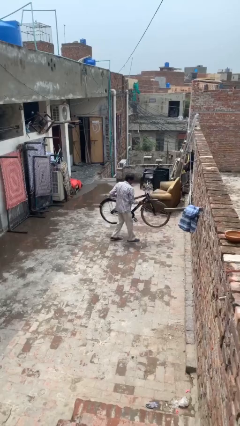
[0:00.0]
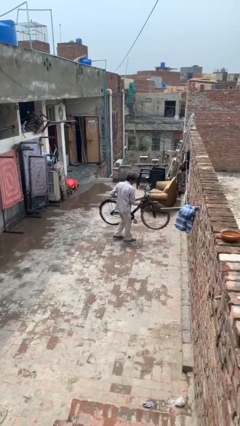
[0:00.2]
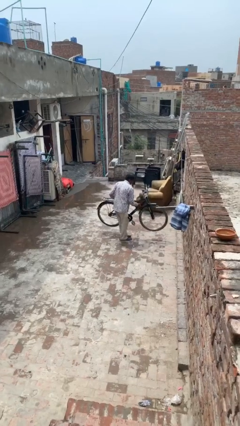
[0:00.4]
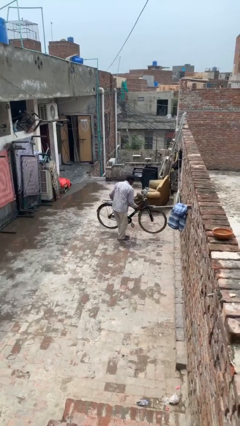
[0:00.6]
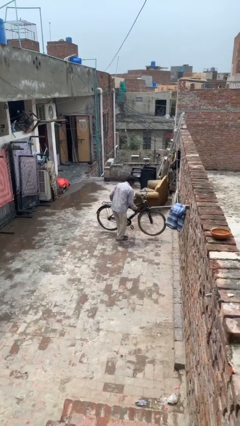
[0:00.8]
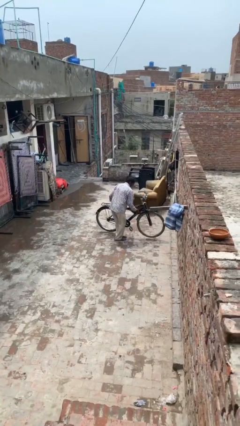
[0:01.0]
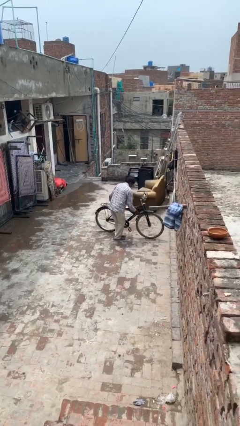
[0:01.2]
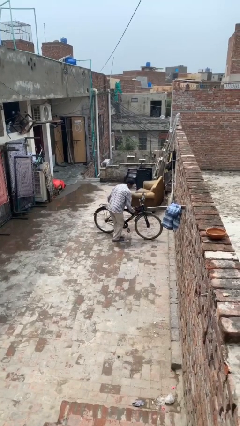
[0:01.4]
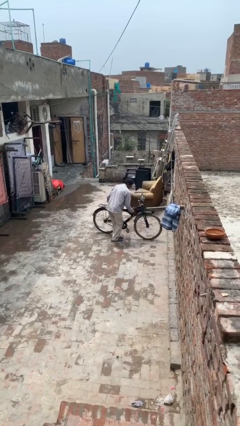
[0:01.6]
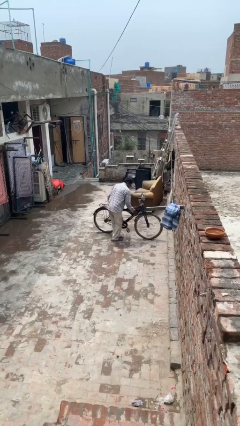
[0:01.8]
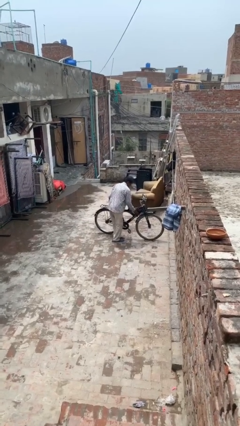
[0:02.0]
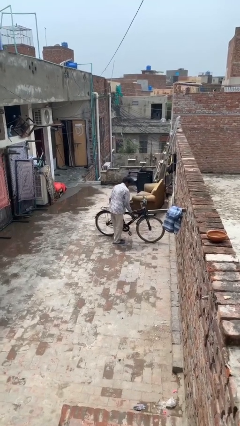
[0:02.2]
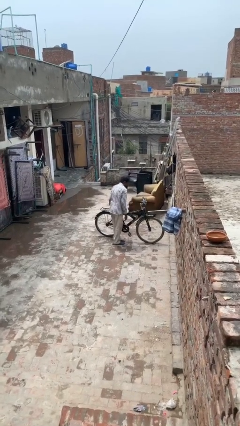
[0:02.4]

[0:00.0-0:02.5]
person puts down object on floor

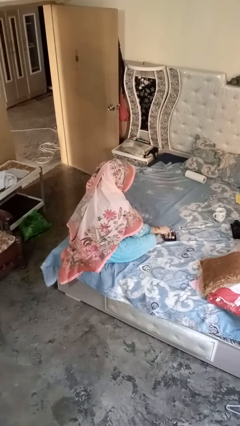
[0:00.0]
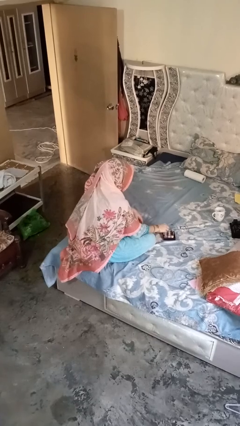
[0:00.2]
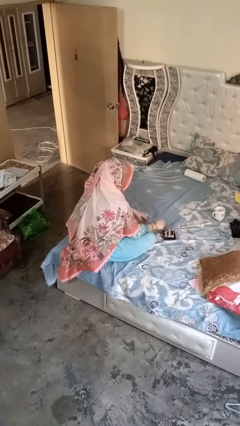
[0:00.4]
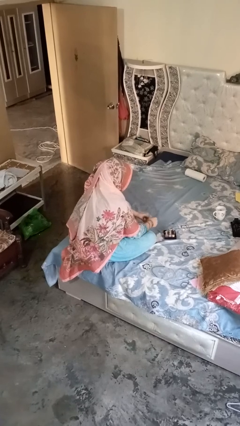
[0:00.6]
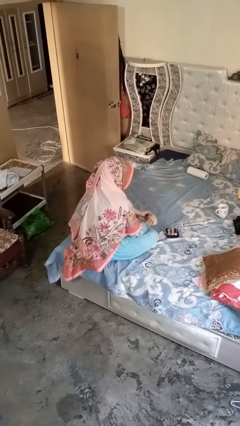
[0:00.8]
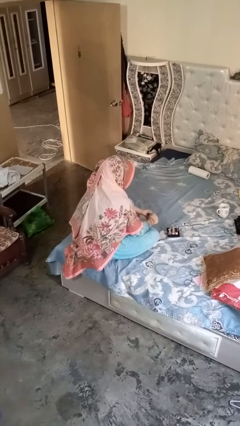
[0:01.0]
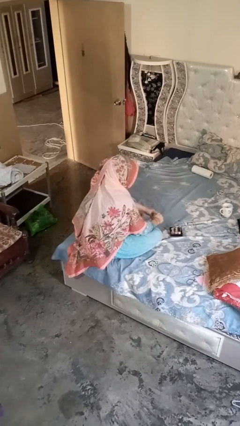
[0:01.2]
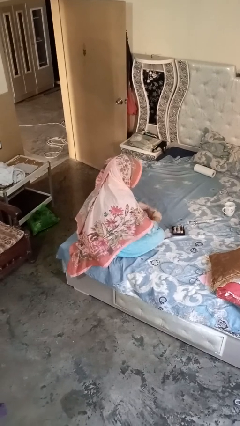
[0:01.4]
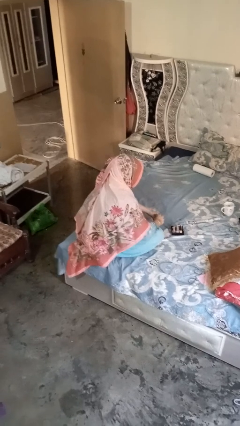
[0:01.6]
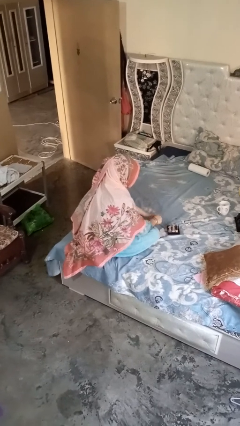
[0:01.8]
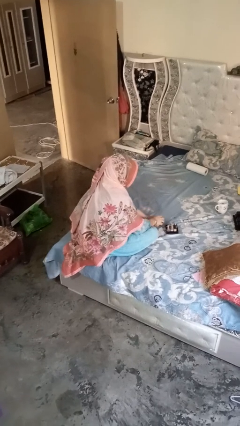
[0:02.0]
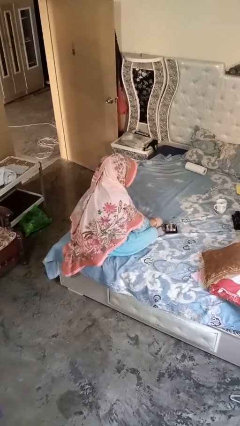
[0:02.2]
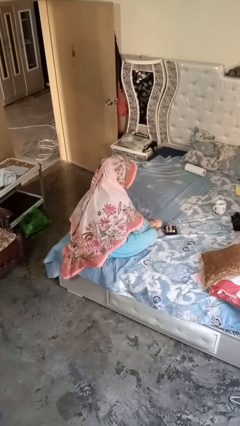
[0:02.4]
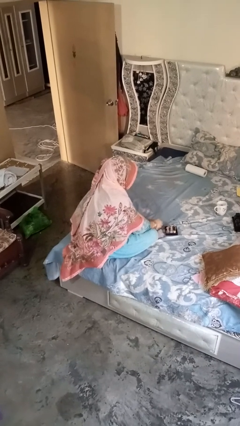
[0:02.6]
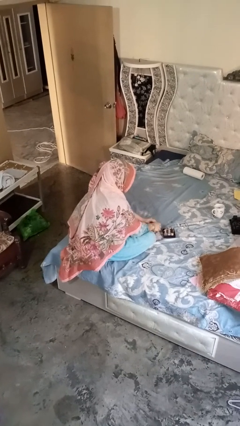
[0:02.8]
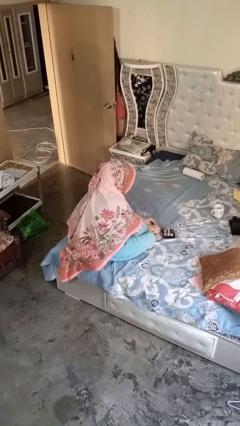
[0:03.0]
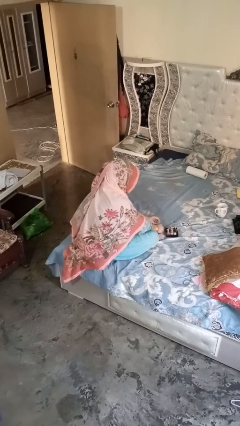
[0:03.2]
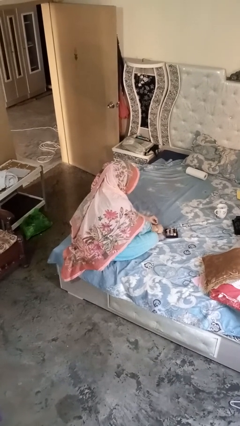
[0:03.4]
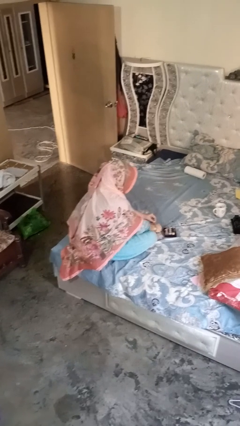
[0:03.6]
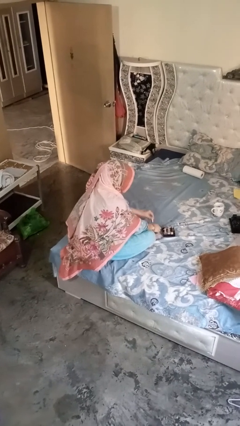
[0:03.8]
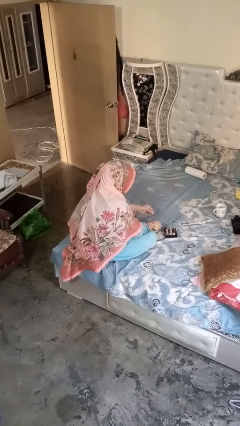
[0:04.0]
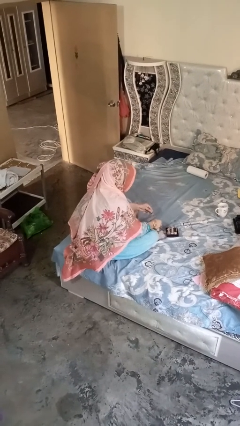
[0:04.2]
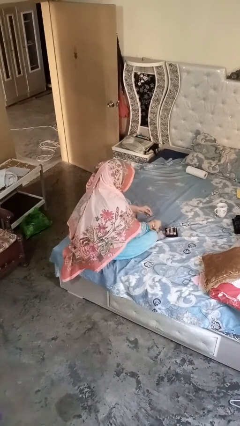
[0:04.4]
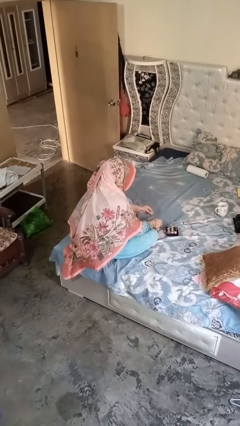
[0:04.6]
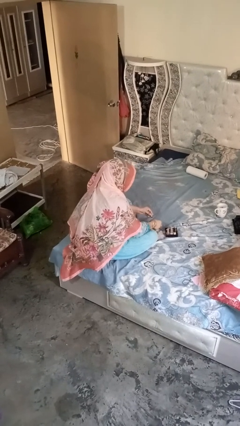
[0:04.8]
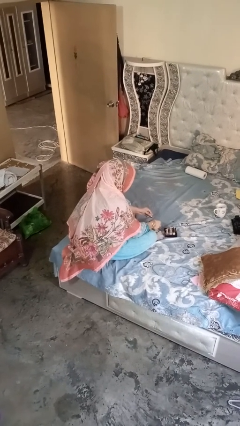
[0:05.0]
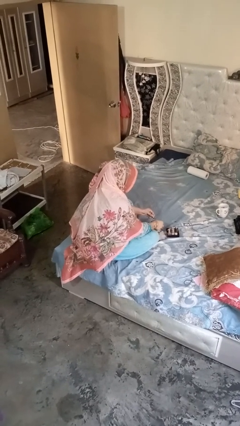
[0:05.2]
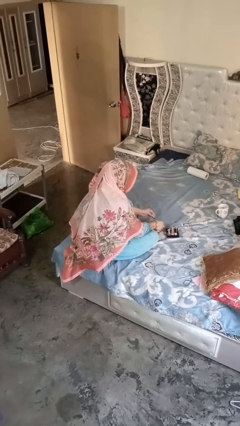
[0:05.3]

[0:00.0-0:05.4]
person paints fingernails

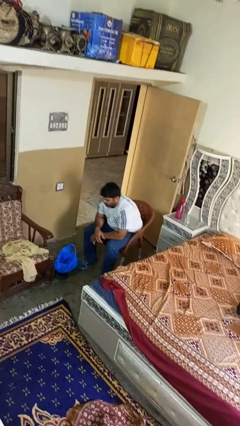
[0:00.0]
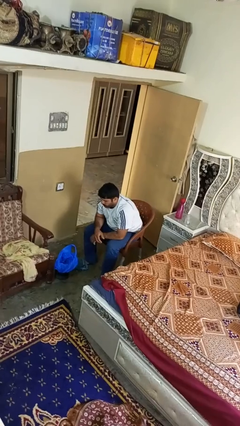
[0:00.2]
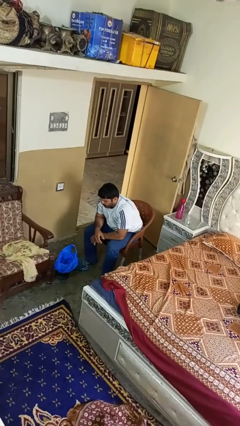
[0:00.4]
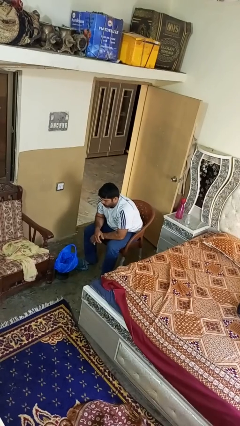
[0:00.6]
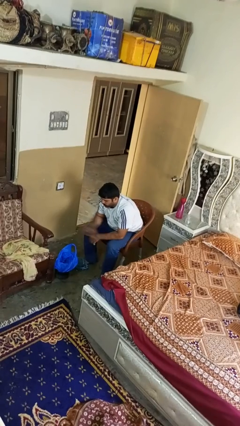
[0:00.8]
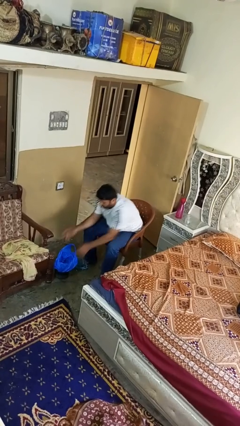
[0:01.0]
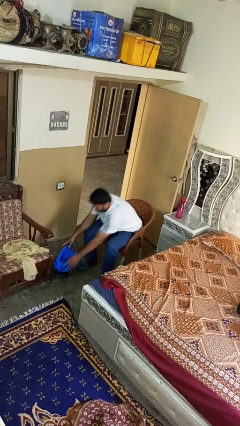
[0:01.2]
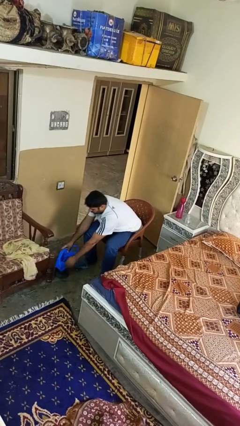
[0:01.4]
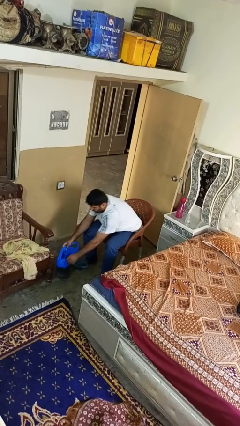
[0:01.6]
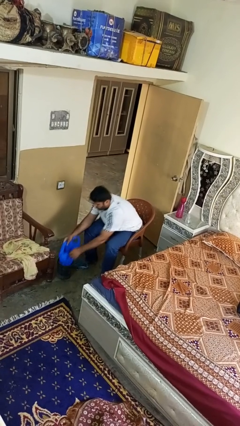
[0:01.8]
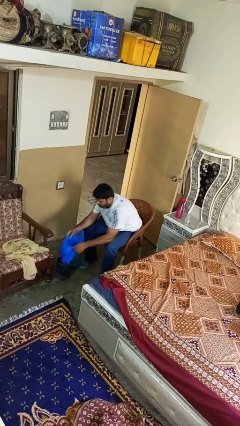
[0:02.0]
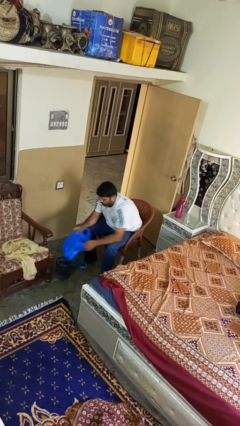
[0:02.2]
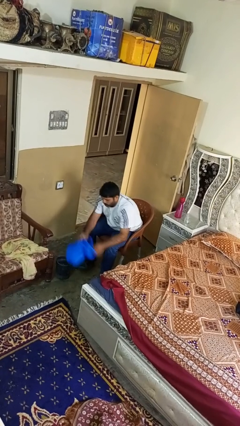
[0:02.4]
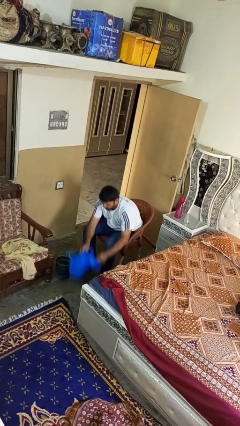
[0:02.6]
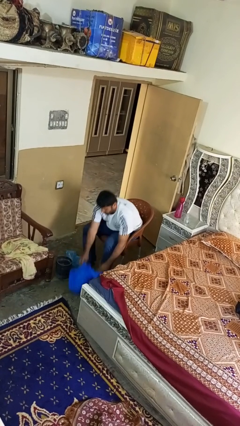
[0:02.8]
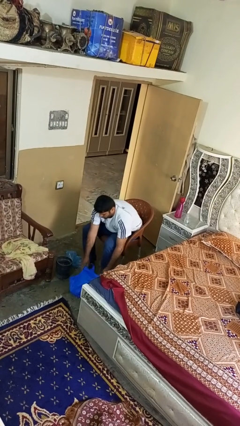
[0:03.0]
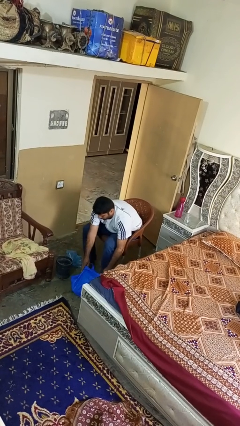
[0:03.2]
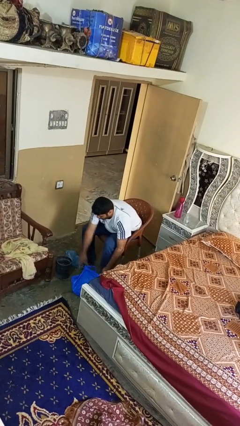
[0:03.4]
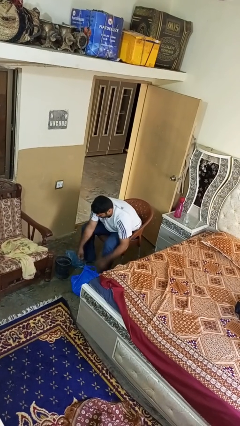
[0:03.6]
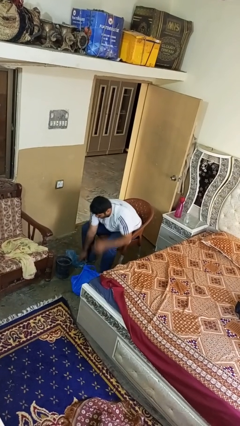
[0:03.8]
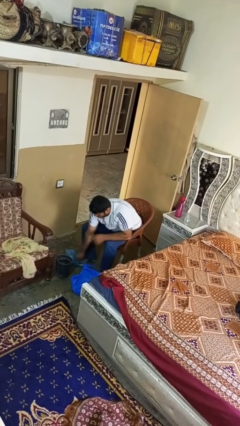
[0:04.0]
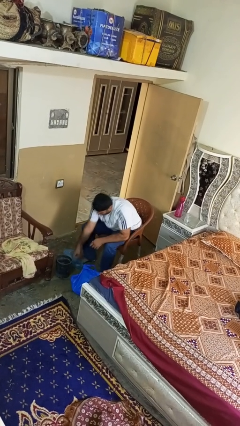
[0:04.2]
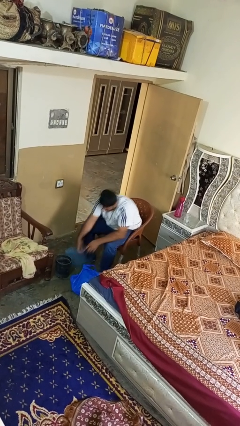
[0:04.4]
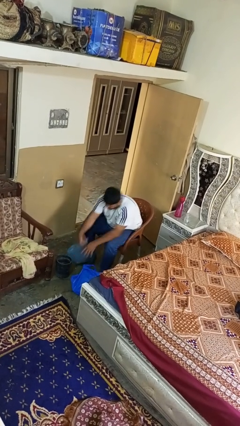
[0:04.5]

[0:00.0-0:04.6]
person removes trashbag from trashcan

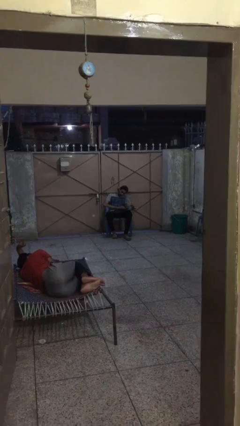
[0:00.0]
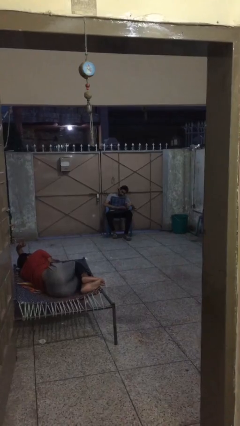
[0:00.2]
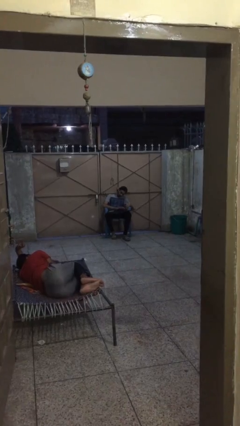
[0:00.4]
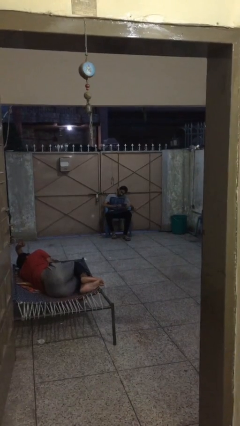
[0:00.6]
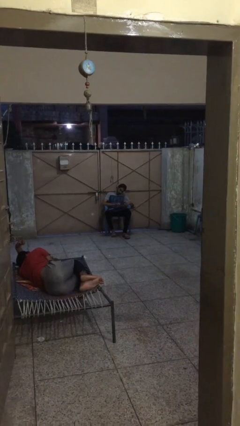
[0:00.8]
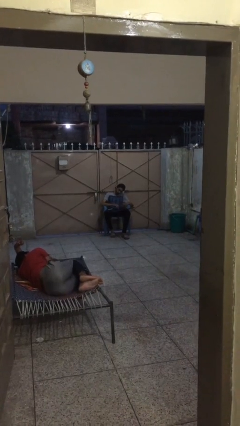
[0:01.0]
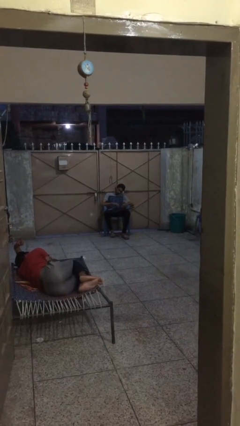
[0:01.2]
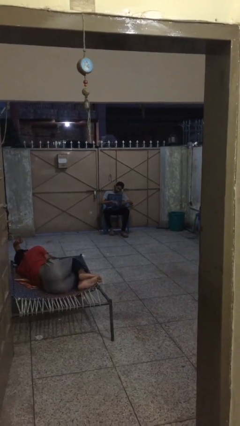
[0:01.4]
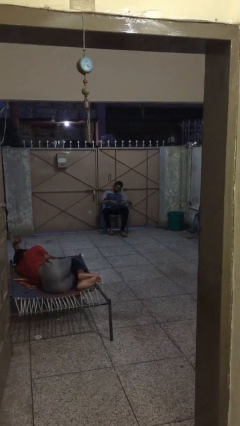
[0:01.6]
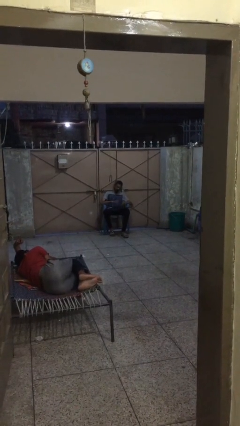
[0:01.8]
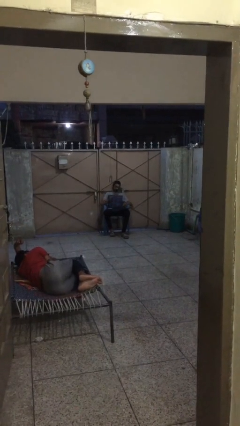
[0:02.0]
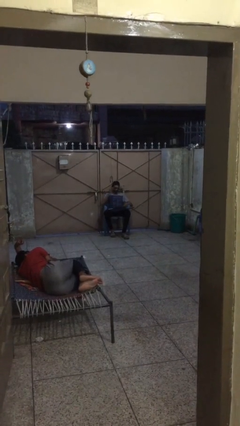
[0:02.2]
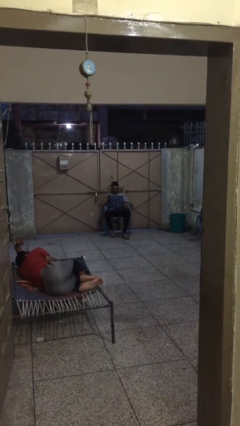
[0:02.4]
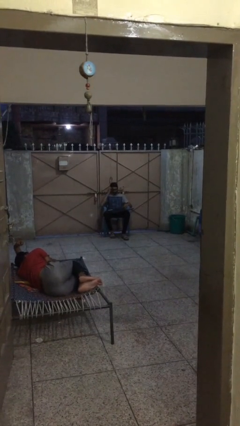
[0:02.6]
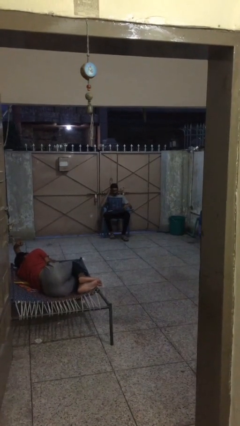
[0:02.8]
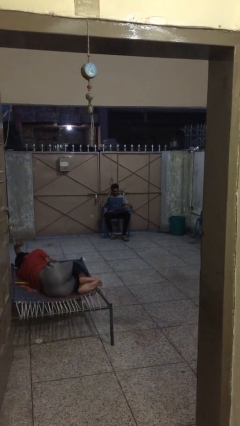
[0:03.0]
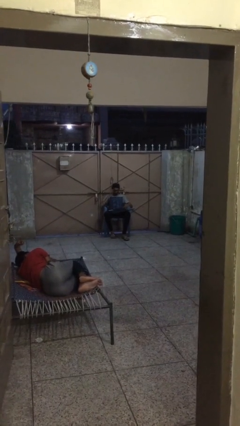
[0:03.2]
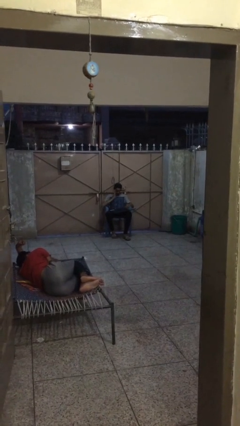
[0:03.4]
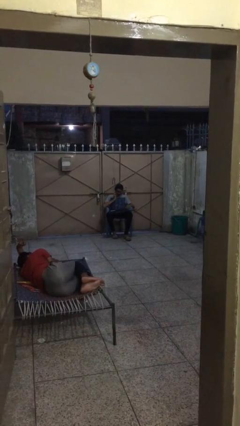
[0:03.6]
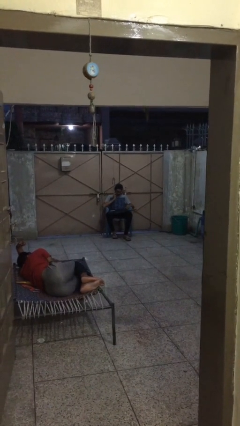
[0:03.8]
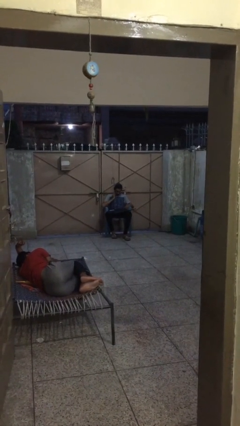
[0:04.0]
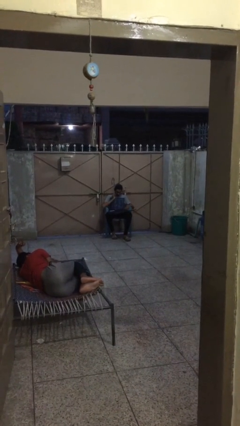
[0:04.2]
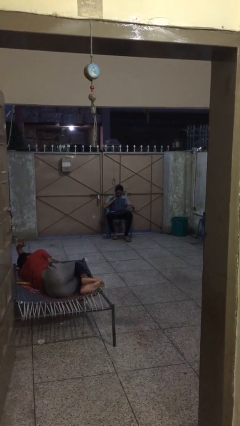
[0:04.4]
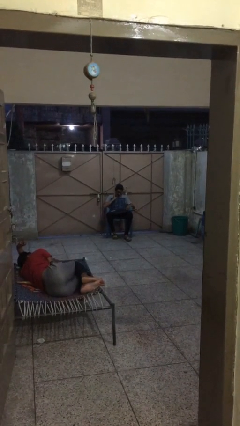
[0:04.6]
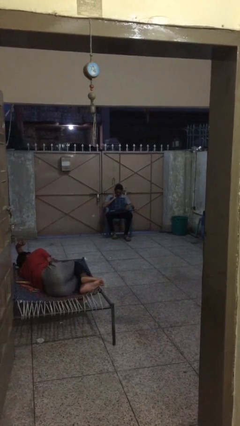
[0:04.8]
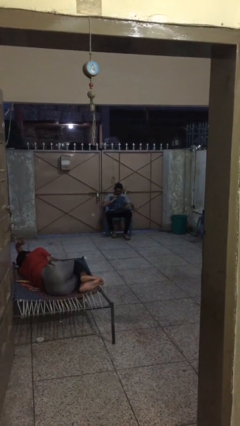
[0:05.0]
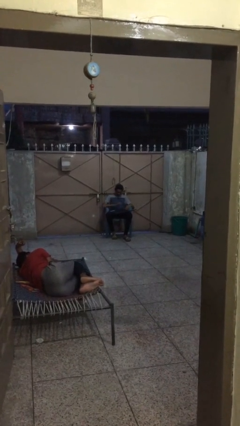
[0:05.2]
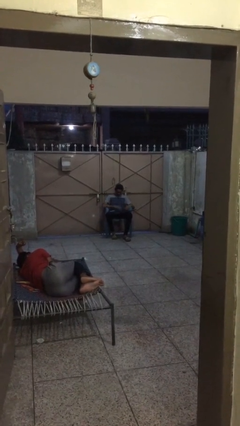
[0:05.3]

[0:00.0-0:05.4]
person interacts with laptop
